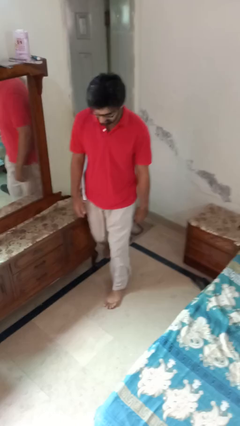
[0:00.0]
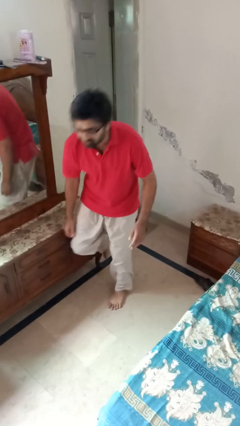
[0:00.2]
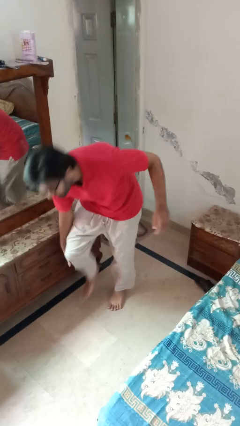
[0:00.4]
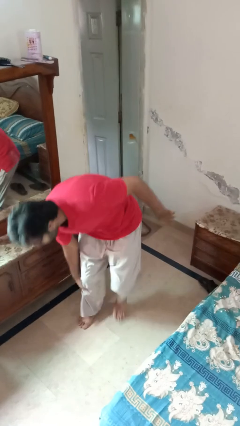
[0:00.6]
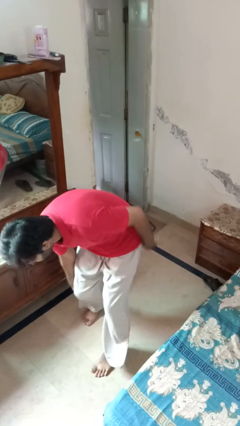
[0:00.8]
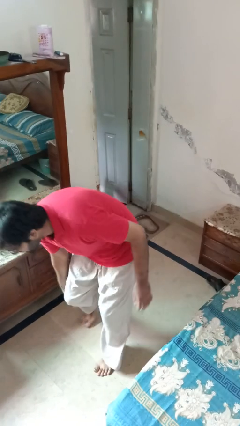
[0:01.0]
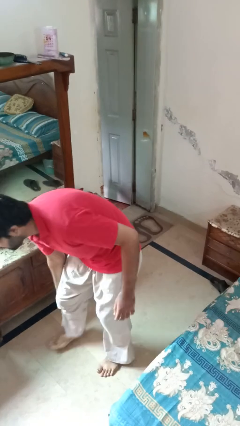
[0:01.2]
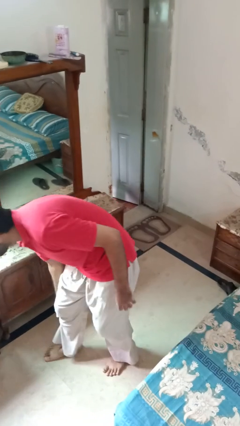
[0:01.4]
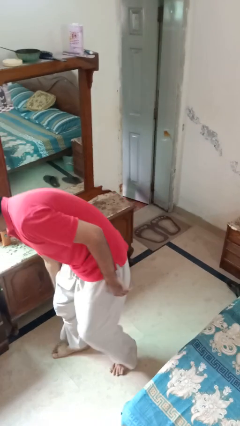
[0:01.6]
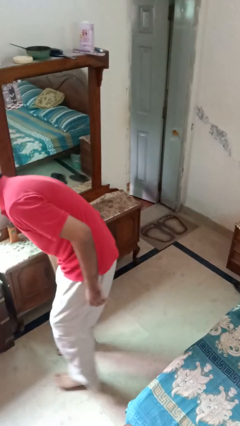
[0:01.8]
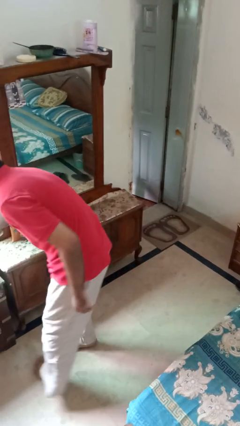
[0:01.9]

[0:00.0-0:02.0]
person stubs toe

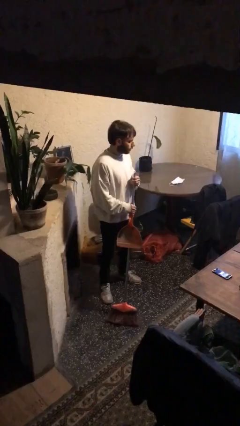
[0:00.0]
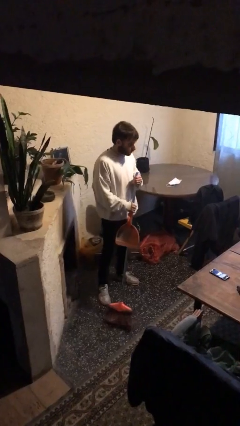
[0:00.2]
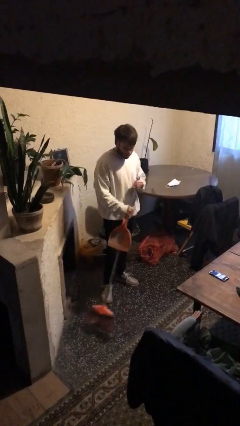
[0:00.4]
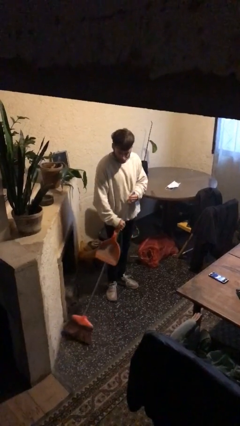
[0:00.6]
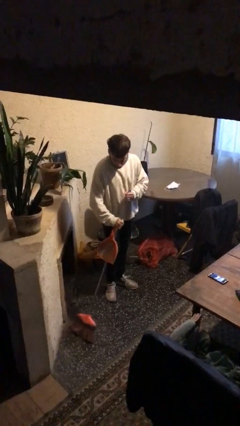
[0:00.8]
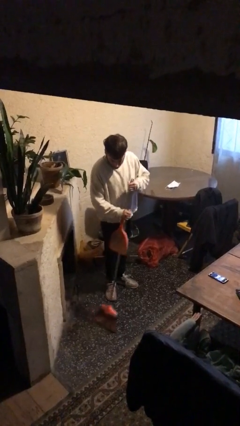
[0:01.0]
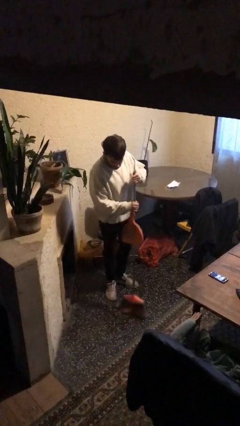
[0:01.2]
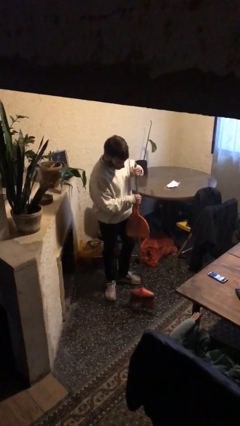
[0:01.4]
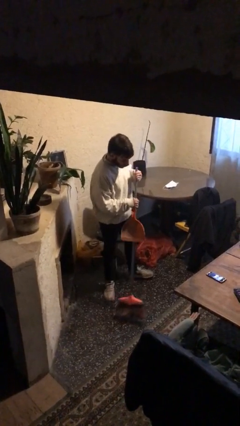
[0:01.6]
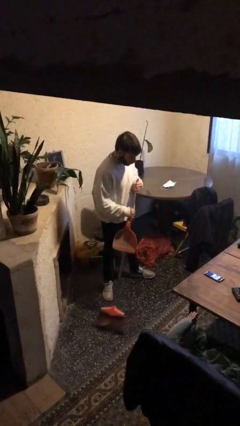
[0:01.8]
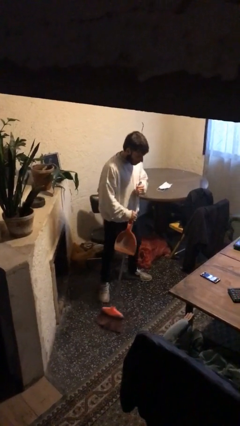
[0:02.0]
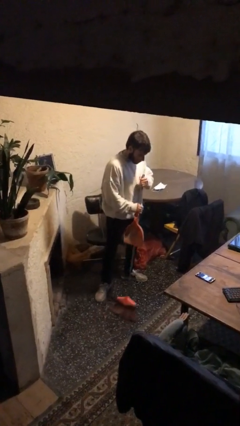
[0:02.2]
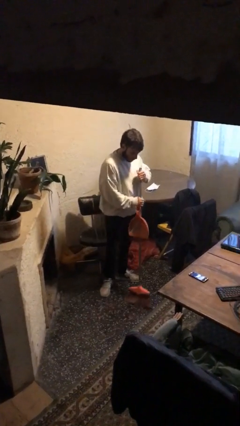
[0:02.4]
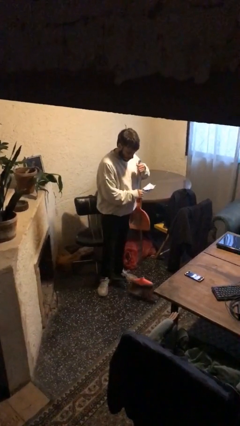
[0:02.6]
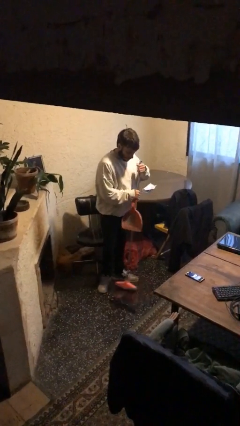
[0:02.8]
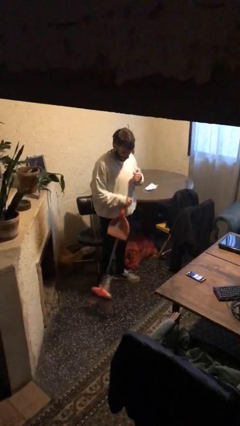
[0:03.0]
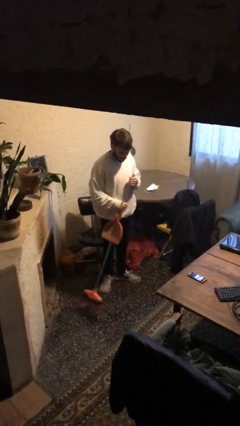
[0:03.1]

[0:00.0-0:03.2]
person sweeps floor

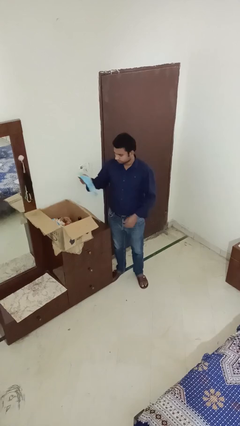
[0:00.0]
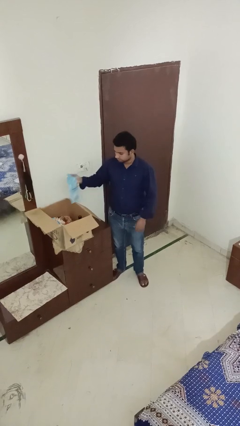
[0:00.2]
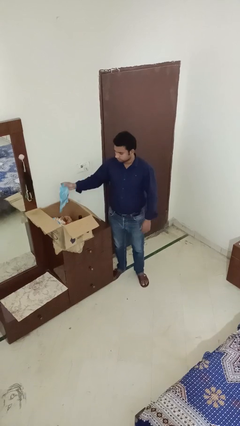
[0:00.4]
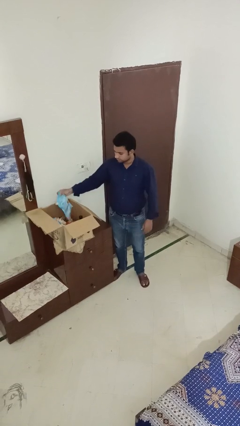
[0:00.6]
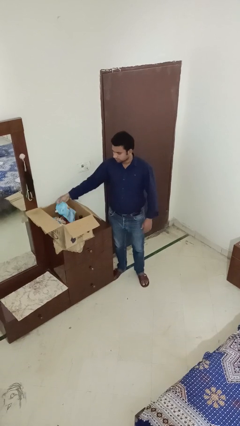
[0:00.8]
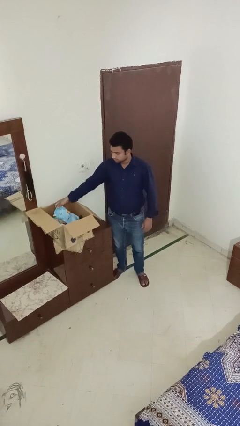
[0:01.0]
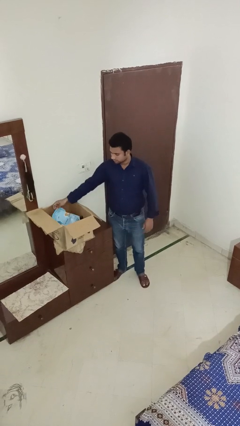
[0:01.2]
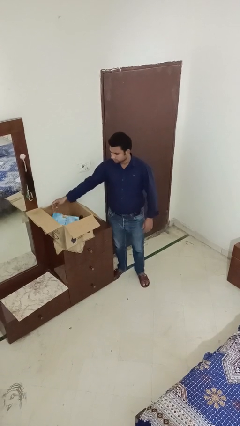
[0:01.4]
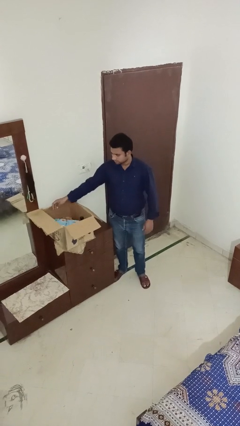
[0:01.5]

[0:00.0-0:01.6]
person puts object into box

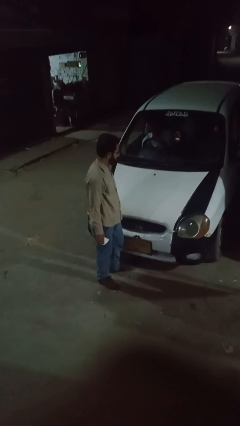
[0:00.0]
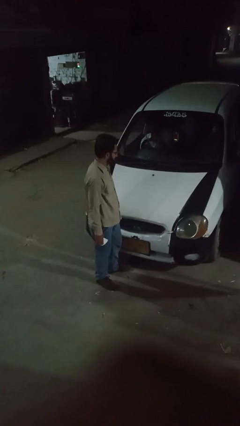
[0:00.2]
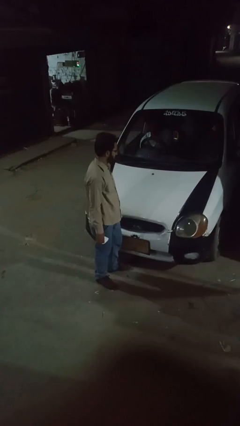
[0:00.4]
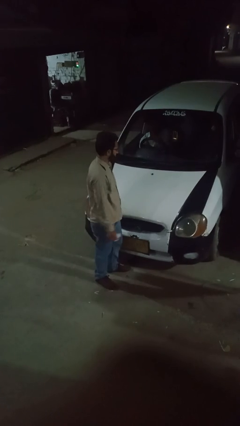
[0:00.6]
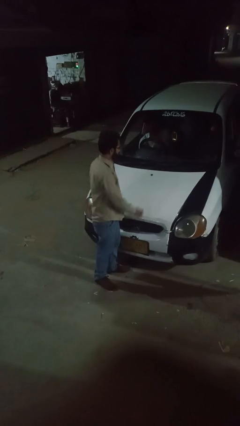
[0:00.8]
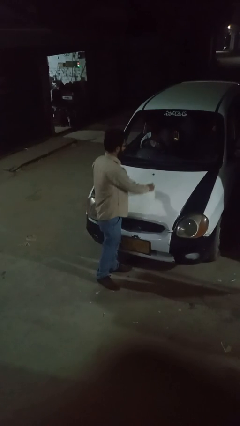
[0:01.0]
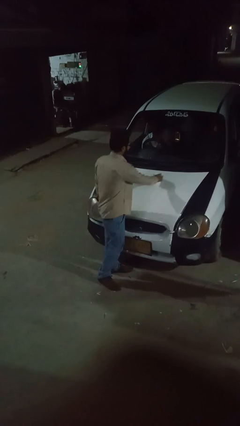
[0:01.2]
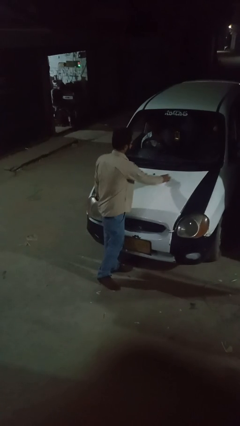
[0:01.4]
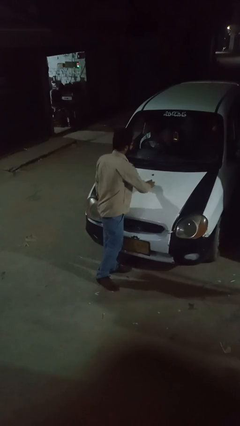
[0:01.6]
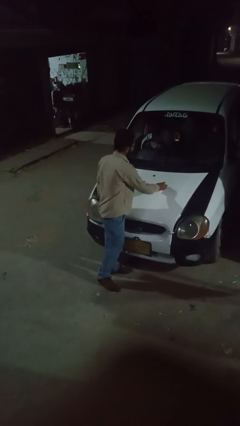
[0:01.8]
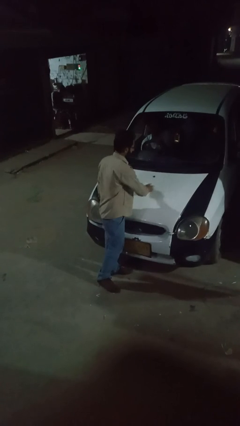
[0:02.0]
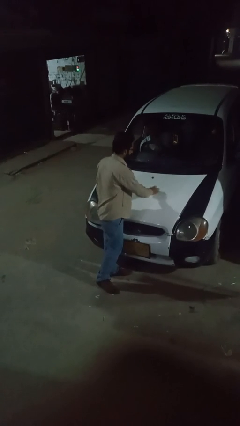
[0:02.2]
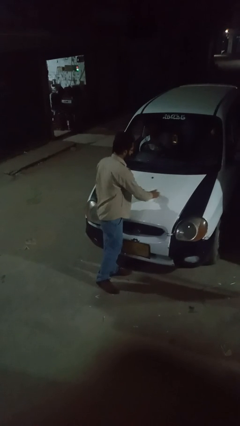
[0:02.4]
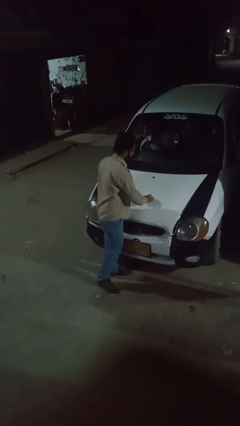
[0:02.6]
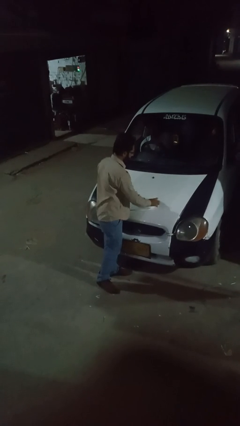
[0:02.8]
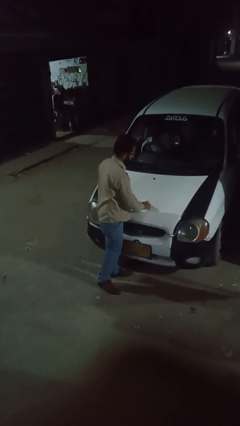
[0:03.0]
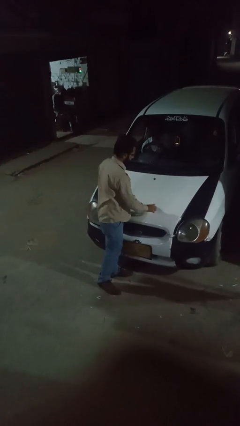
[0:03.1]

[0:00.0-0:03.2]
person polishes car with rag

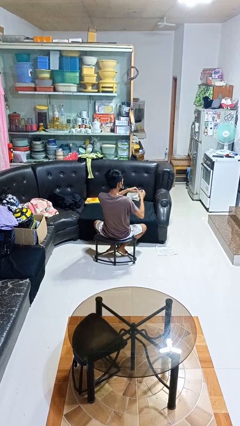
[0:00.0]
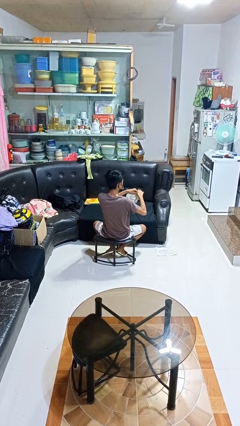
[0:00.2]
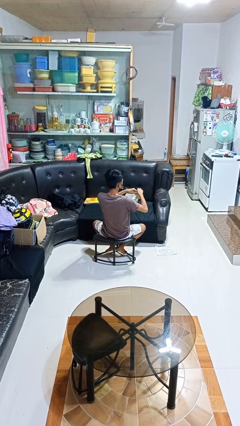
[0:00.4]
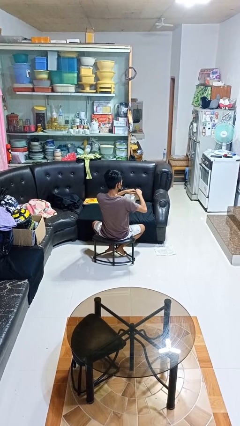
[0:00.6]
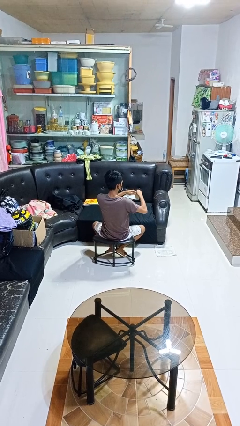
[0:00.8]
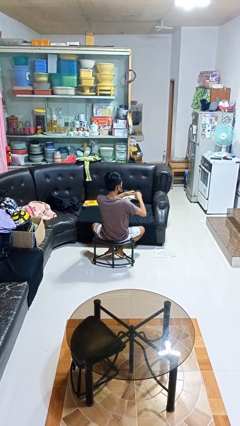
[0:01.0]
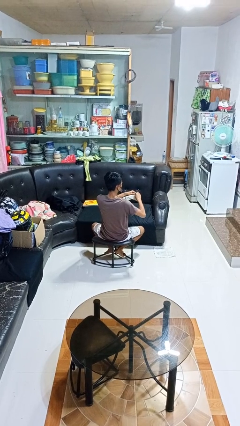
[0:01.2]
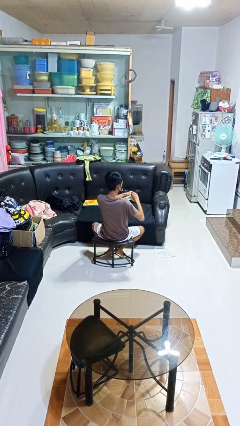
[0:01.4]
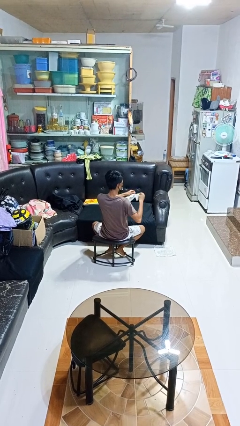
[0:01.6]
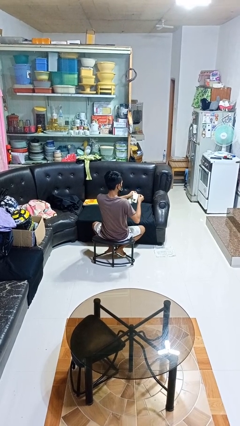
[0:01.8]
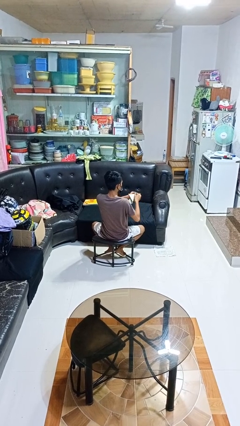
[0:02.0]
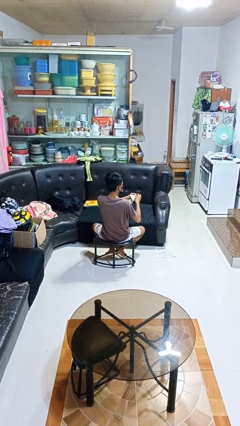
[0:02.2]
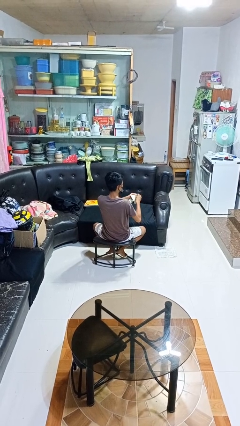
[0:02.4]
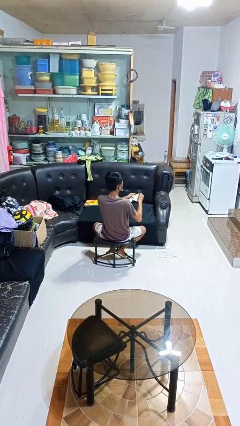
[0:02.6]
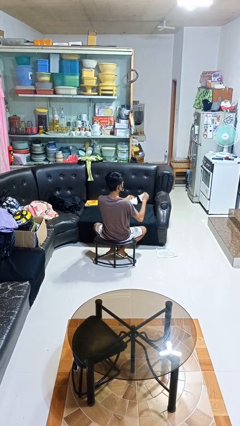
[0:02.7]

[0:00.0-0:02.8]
person tears paper

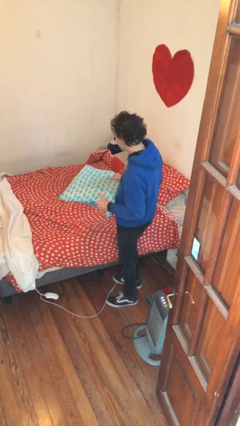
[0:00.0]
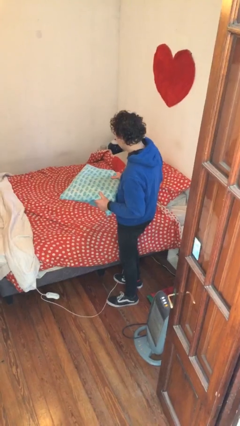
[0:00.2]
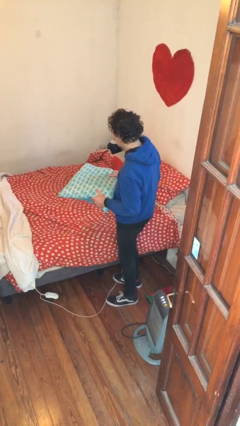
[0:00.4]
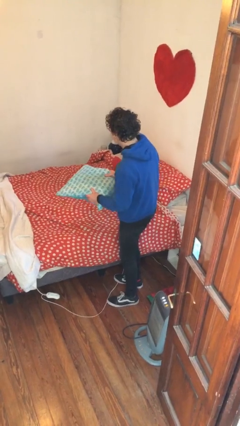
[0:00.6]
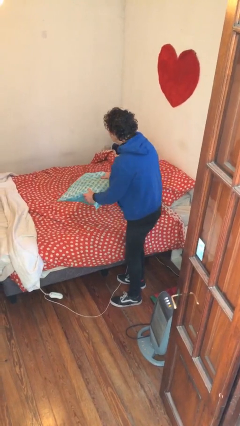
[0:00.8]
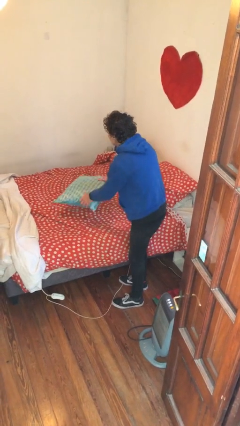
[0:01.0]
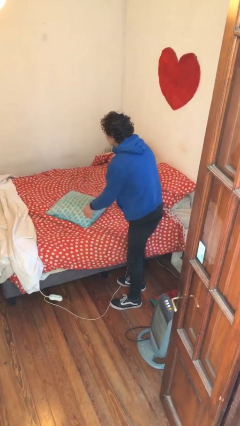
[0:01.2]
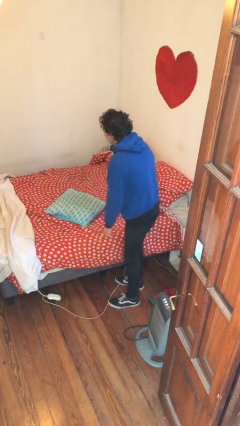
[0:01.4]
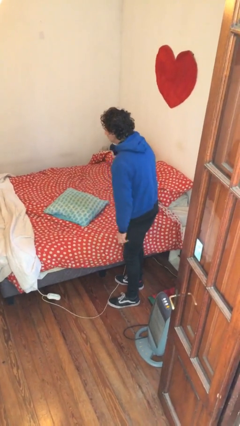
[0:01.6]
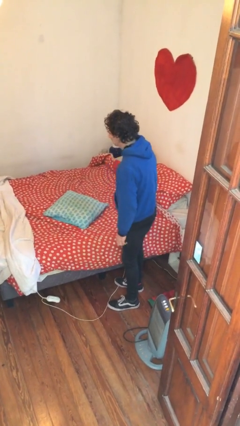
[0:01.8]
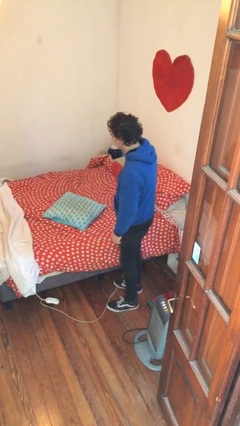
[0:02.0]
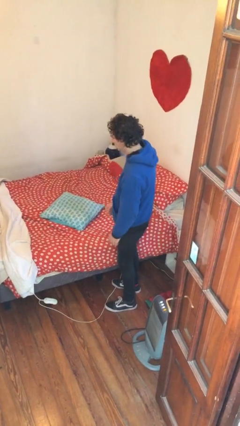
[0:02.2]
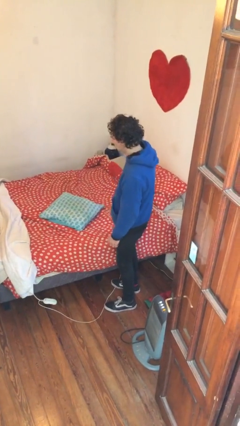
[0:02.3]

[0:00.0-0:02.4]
person puts down object on bed

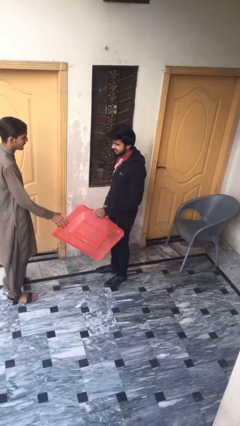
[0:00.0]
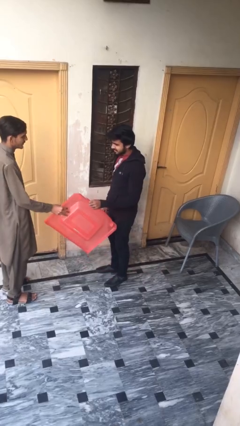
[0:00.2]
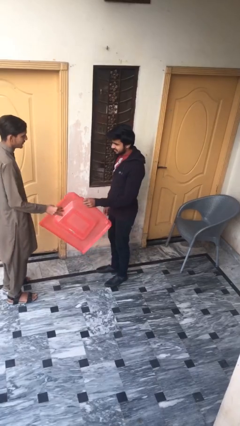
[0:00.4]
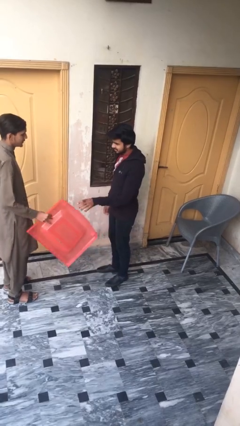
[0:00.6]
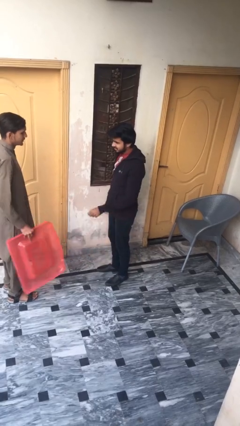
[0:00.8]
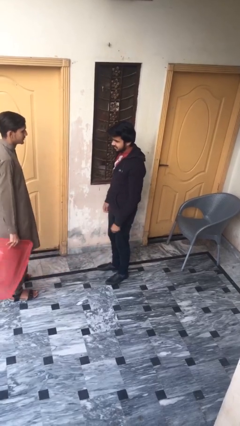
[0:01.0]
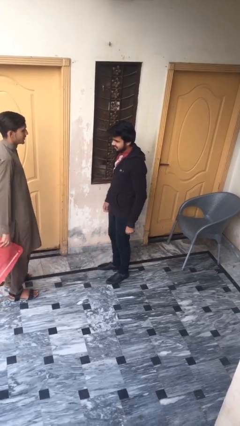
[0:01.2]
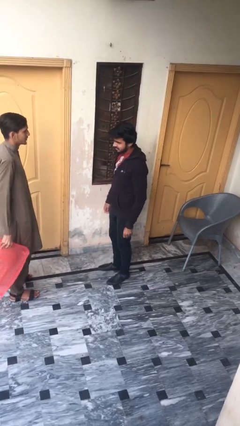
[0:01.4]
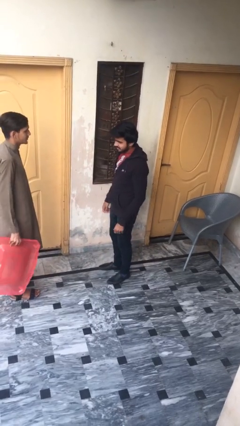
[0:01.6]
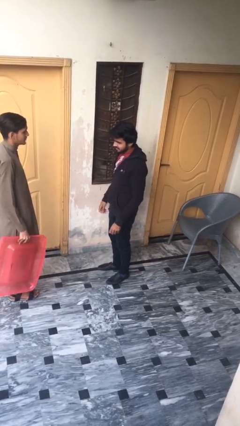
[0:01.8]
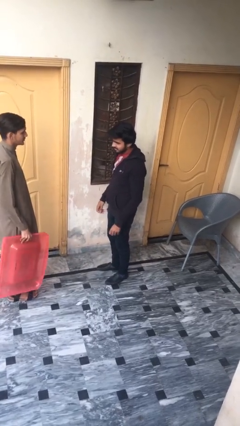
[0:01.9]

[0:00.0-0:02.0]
person transfers object to person
